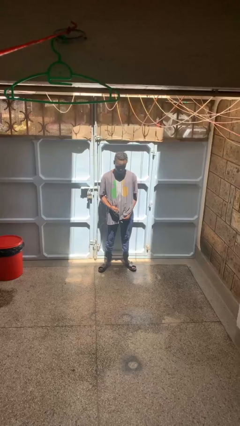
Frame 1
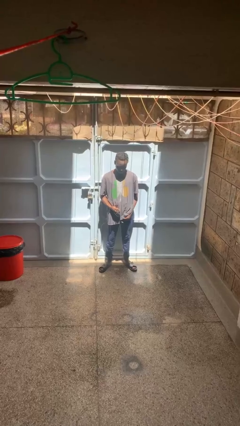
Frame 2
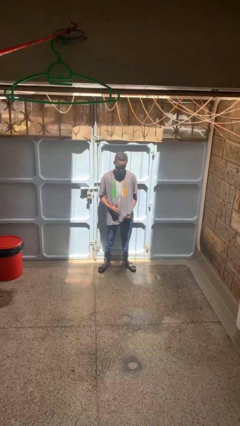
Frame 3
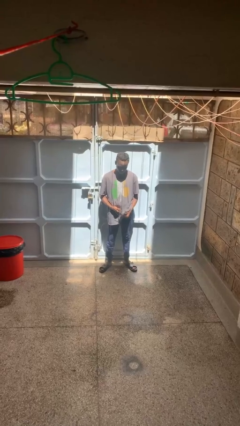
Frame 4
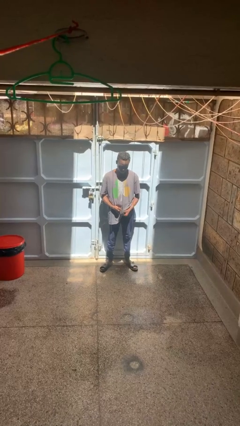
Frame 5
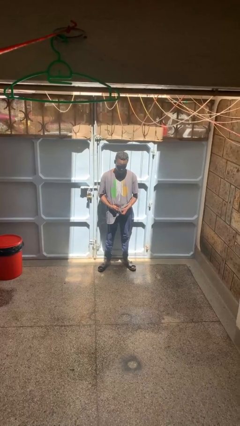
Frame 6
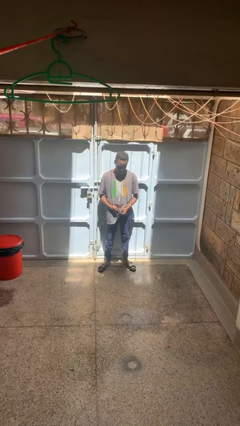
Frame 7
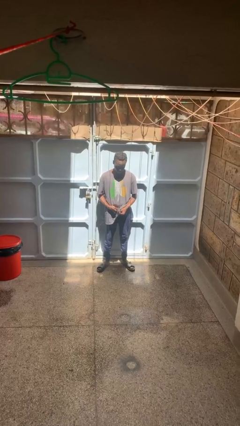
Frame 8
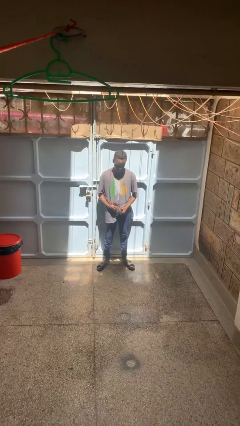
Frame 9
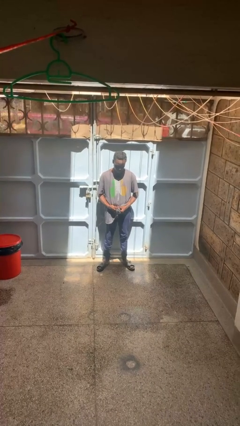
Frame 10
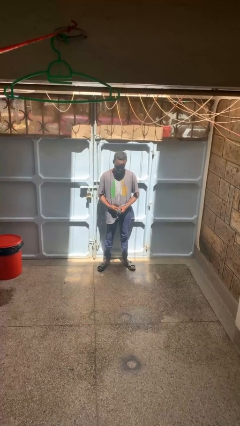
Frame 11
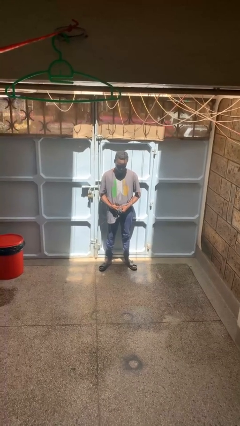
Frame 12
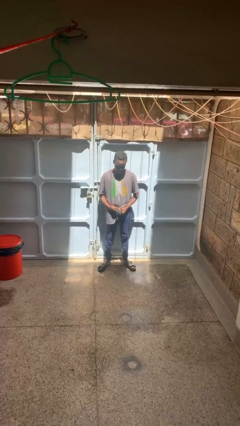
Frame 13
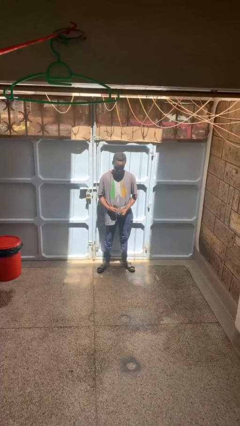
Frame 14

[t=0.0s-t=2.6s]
person cleans eyeglasses

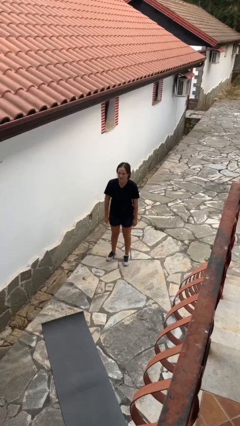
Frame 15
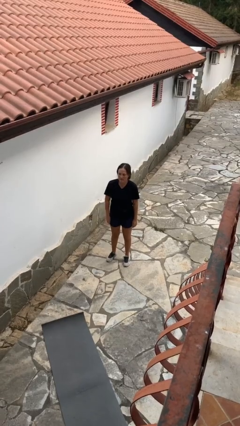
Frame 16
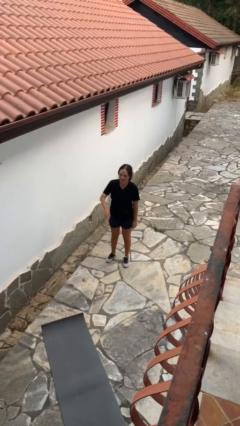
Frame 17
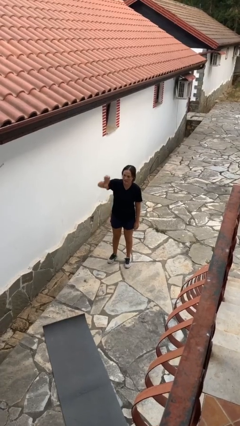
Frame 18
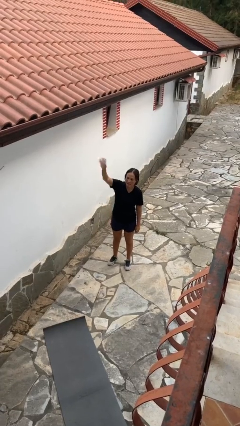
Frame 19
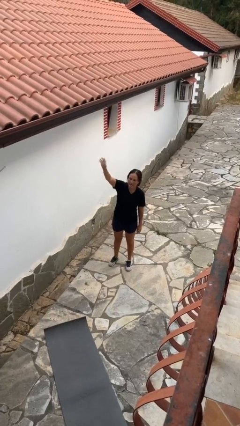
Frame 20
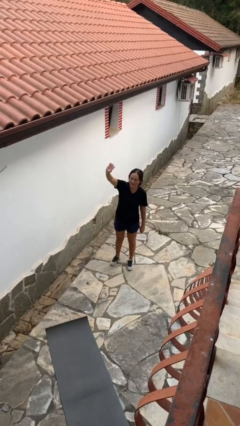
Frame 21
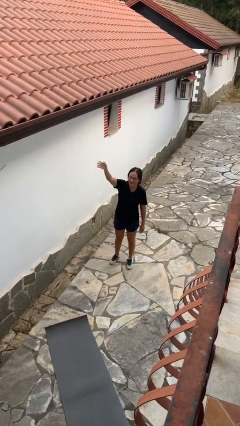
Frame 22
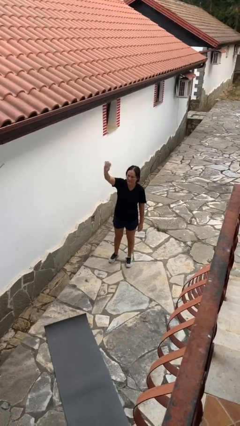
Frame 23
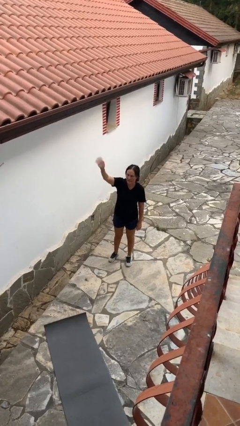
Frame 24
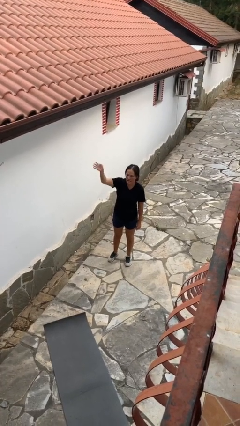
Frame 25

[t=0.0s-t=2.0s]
person gestures raise hand

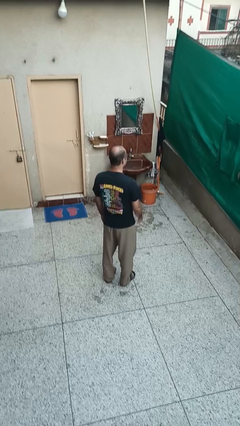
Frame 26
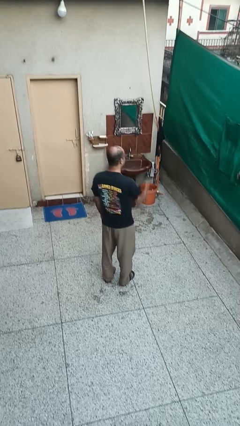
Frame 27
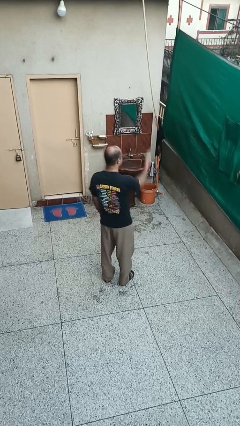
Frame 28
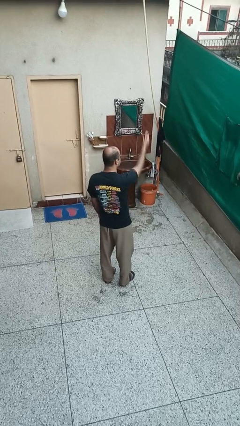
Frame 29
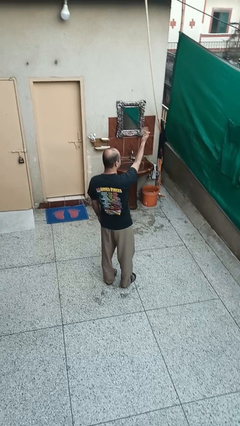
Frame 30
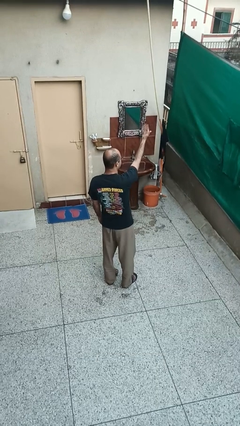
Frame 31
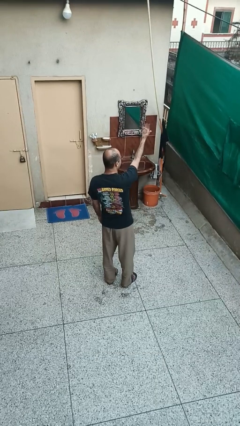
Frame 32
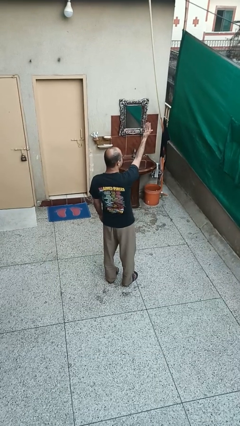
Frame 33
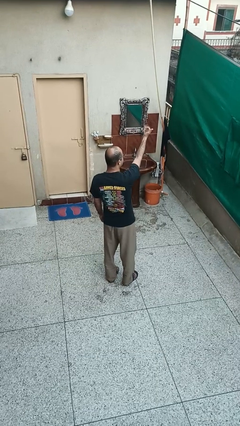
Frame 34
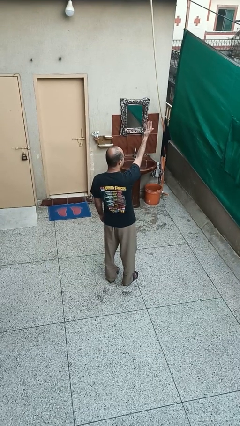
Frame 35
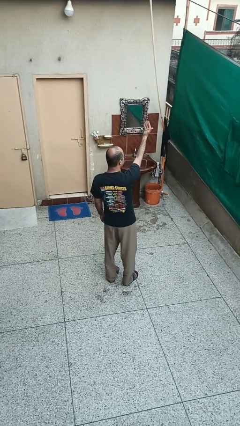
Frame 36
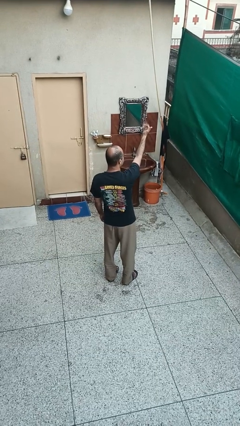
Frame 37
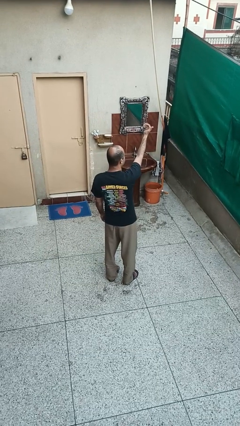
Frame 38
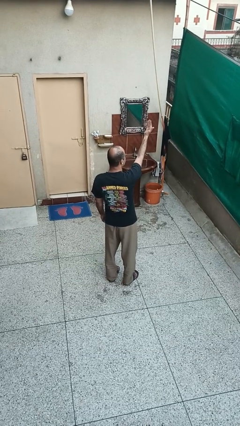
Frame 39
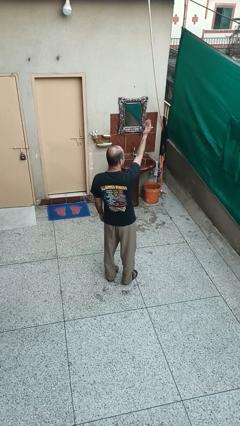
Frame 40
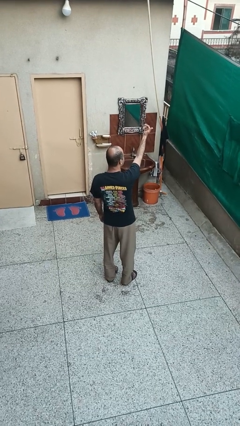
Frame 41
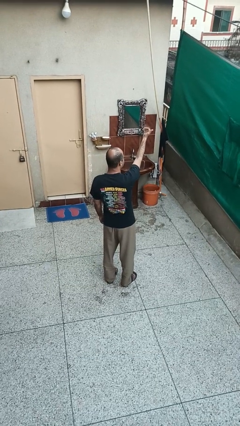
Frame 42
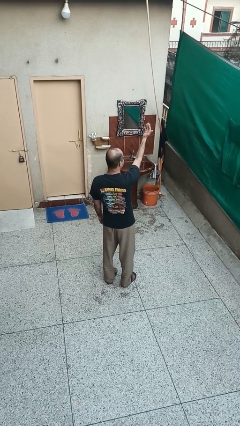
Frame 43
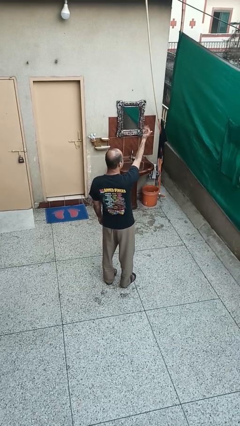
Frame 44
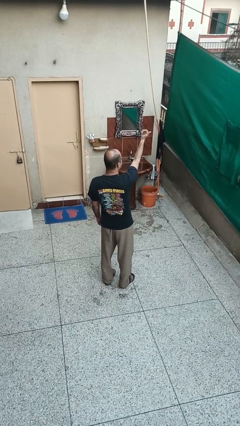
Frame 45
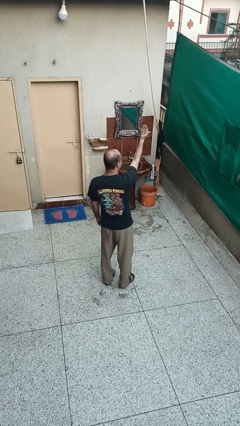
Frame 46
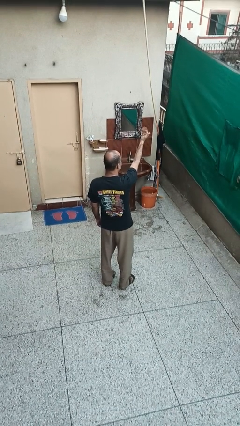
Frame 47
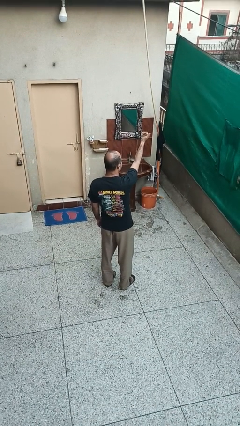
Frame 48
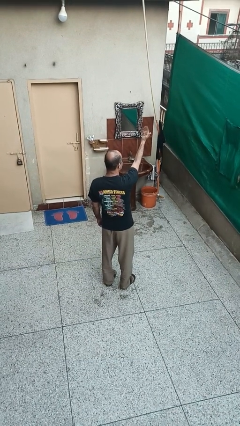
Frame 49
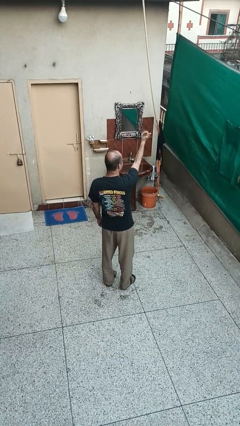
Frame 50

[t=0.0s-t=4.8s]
person gestures come here

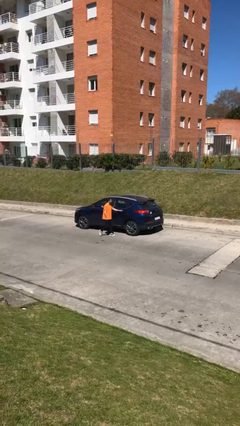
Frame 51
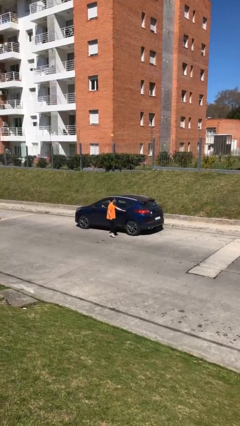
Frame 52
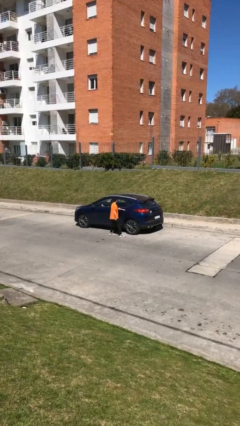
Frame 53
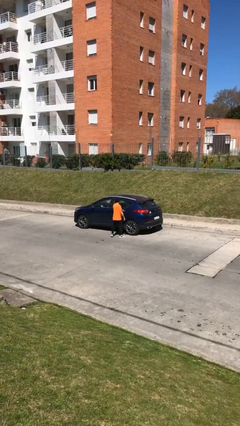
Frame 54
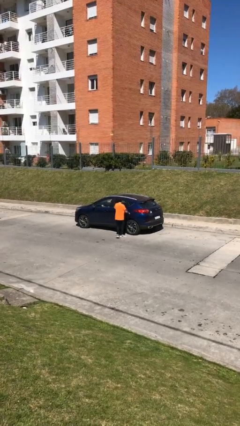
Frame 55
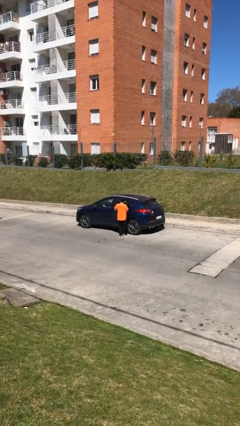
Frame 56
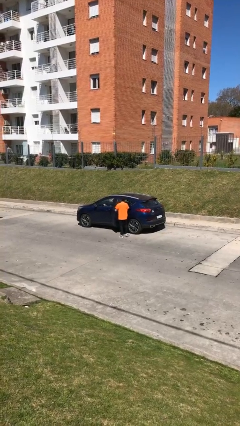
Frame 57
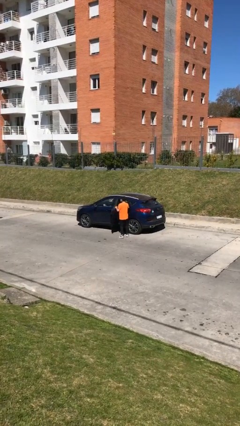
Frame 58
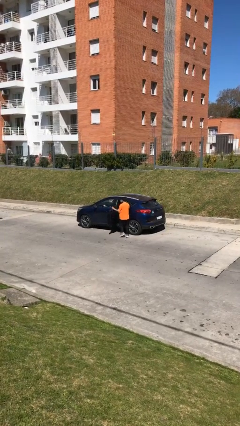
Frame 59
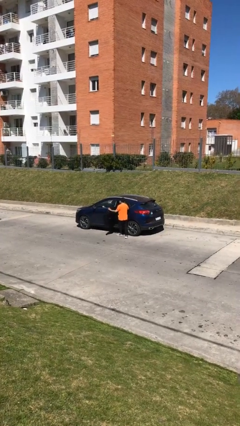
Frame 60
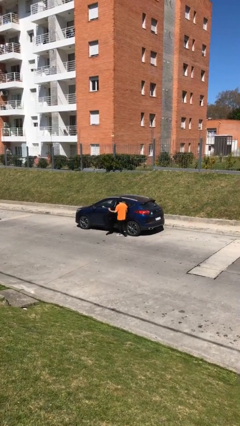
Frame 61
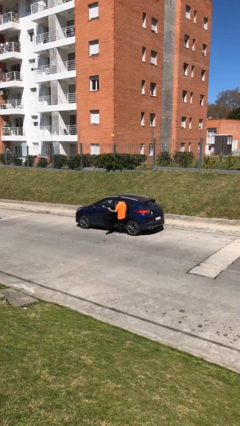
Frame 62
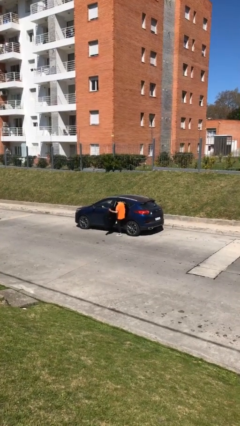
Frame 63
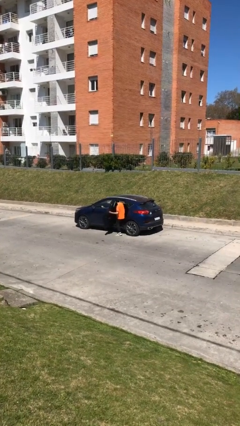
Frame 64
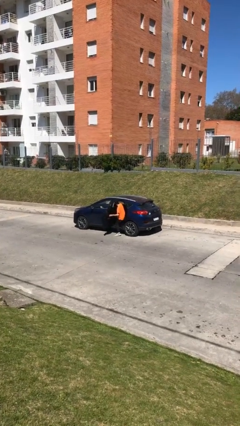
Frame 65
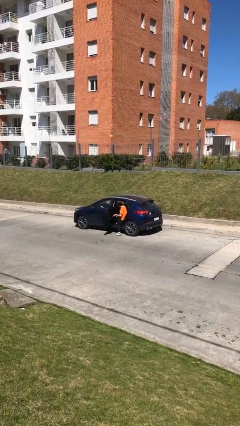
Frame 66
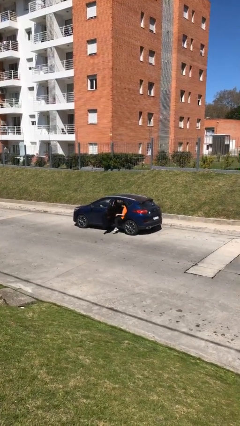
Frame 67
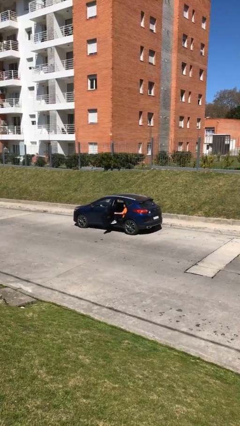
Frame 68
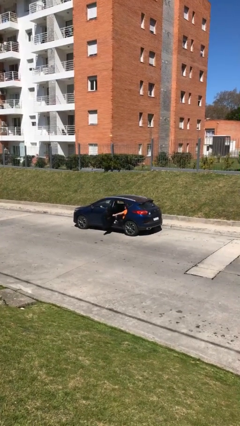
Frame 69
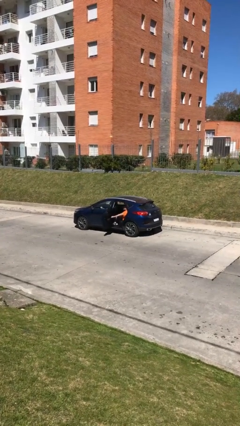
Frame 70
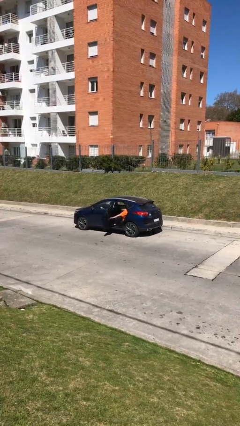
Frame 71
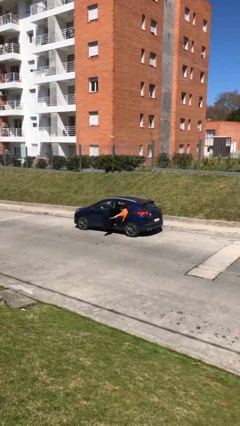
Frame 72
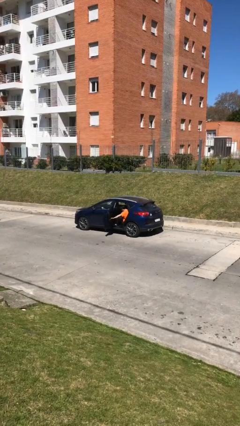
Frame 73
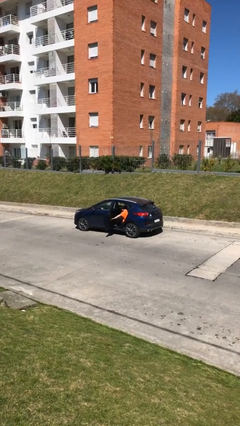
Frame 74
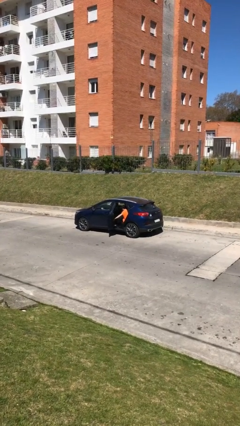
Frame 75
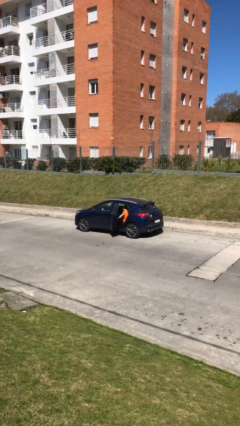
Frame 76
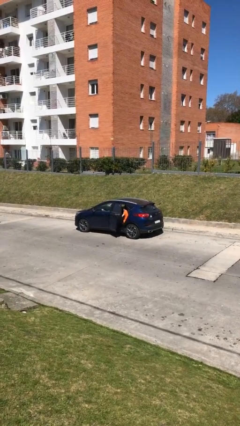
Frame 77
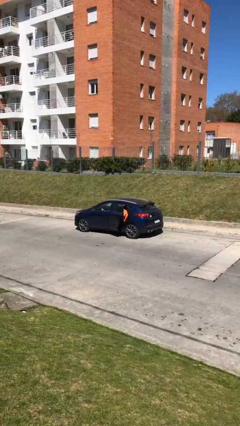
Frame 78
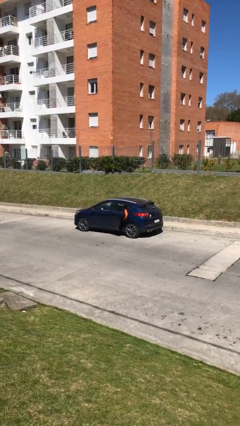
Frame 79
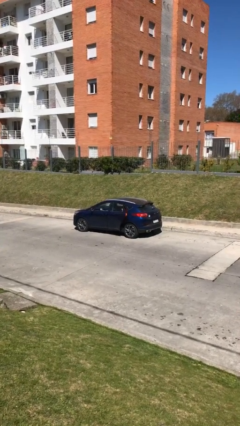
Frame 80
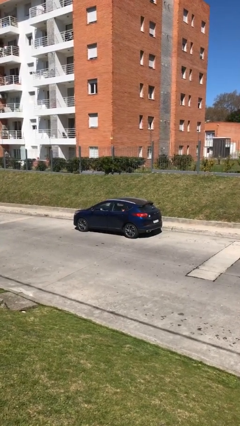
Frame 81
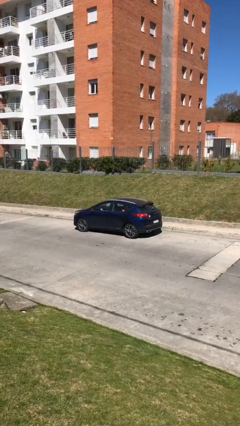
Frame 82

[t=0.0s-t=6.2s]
car picks up person

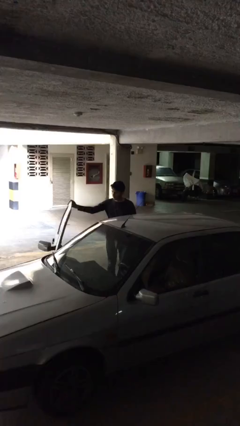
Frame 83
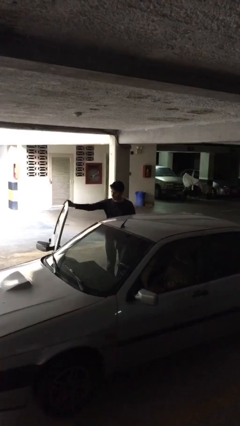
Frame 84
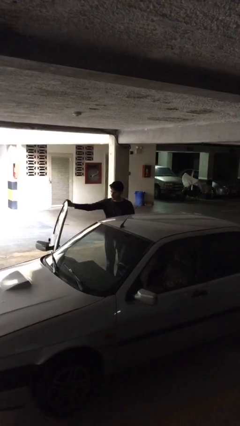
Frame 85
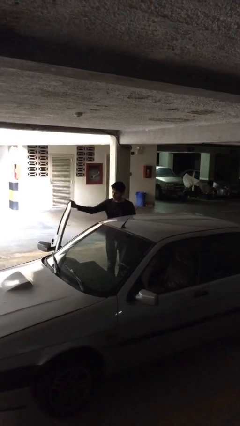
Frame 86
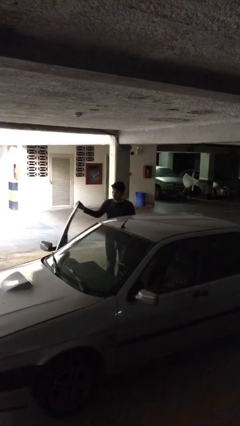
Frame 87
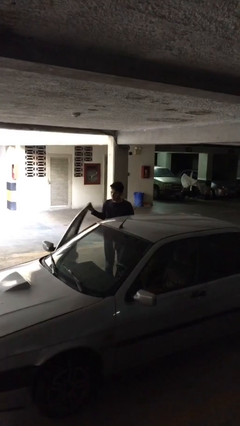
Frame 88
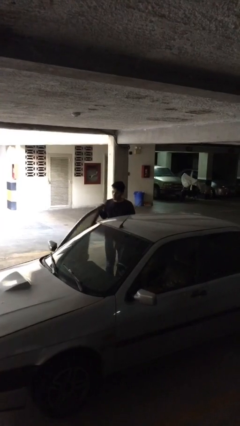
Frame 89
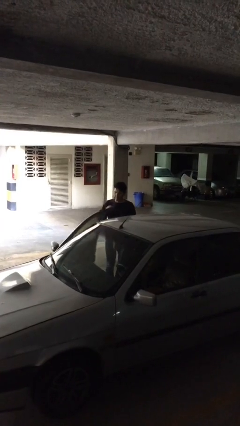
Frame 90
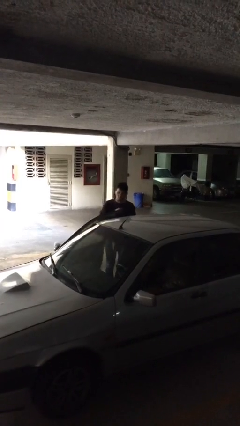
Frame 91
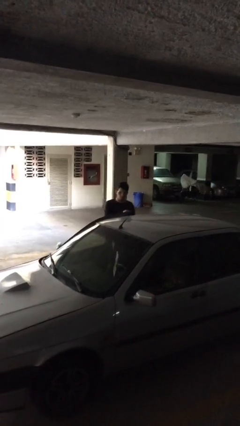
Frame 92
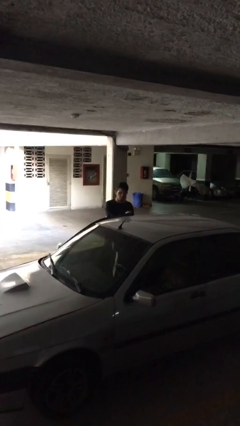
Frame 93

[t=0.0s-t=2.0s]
person closes car door
